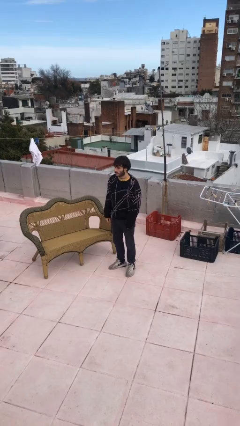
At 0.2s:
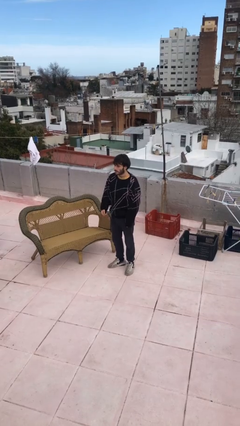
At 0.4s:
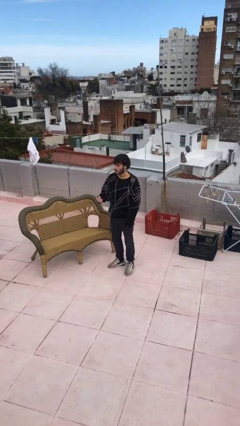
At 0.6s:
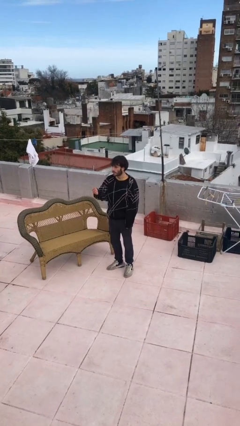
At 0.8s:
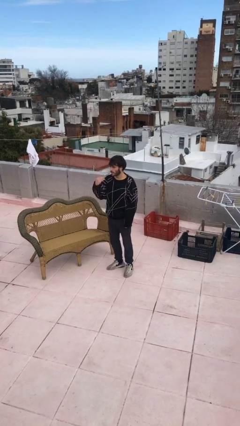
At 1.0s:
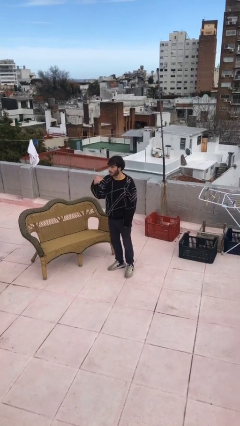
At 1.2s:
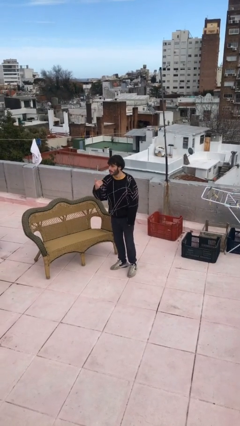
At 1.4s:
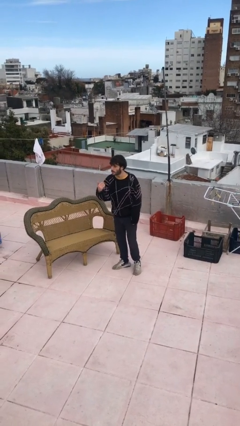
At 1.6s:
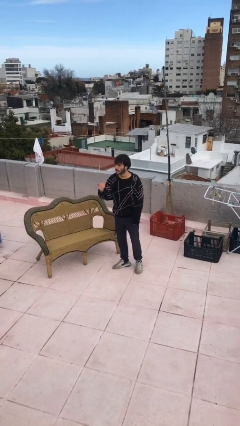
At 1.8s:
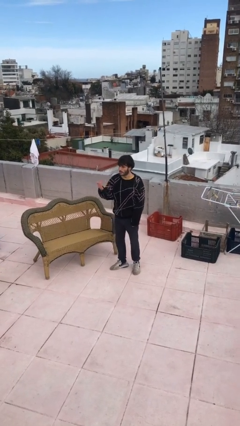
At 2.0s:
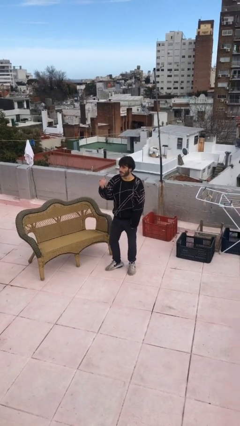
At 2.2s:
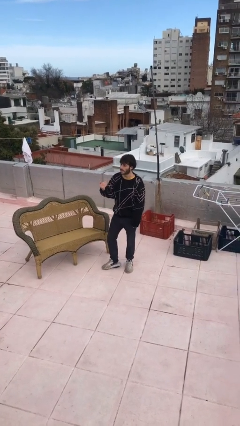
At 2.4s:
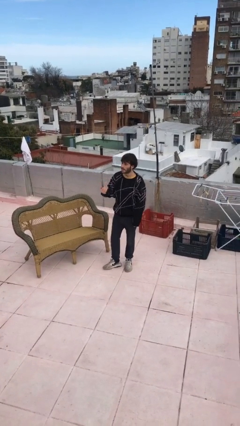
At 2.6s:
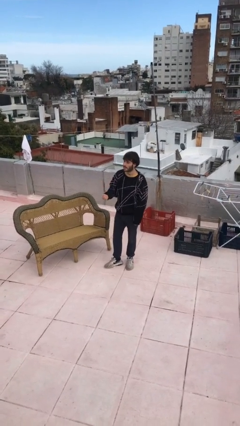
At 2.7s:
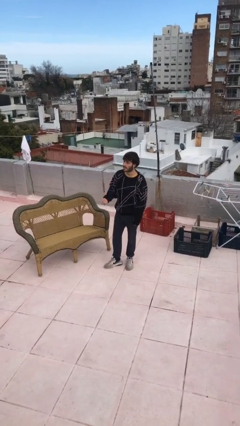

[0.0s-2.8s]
person gestures come here

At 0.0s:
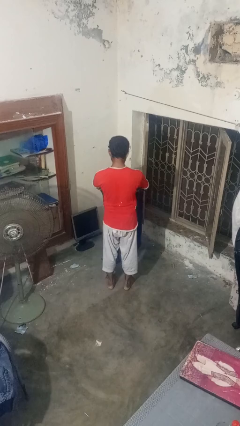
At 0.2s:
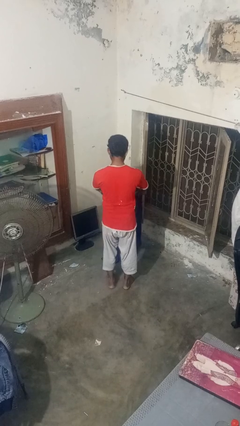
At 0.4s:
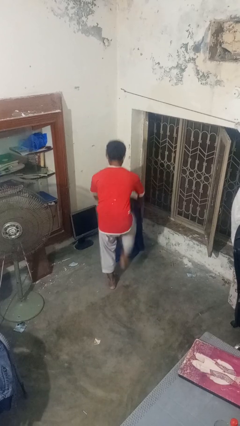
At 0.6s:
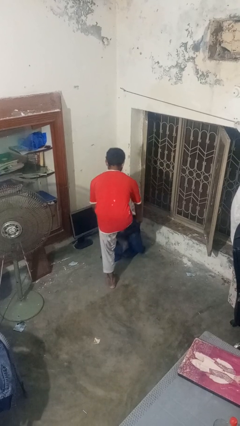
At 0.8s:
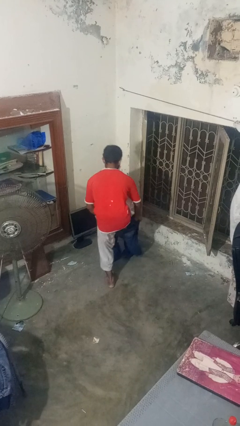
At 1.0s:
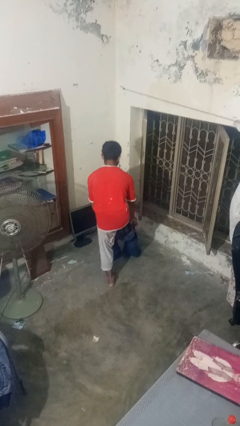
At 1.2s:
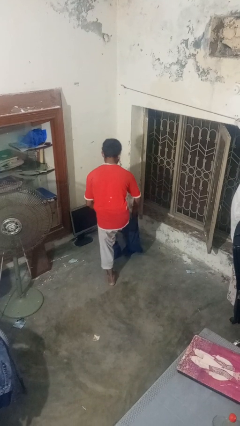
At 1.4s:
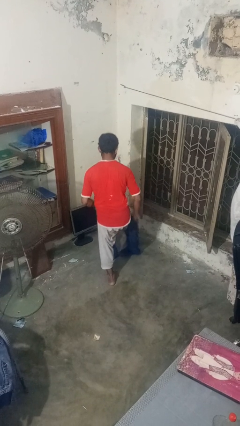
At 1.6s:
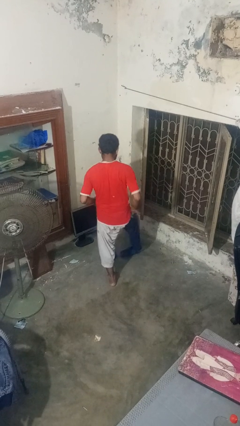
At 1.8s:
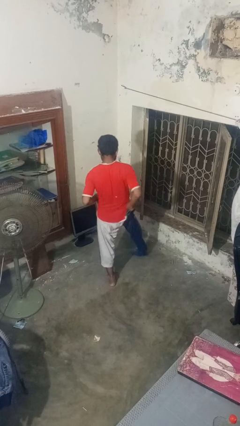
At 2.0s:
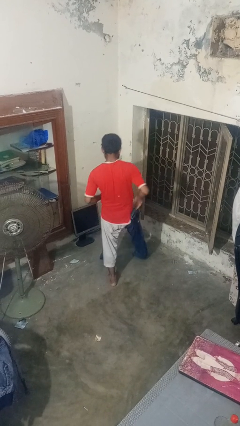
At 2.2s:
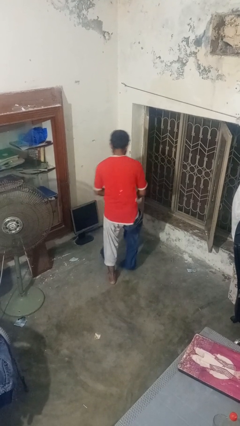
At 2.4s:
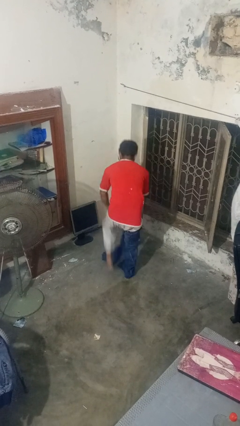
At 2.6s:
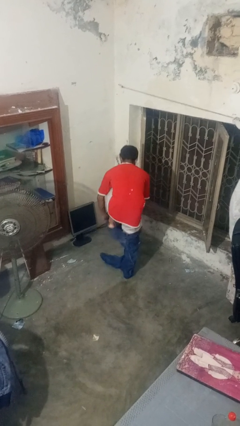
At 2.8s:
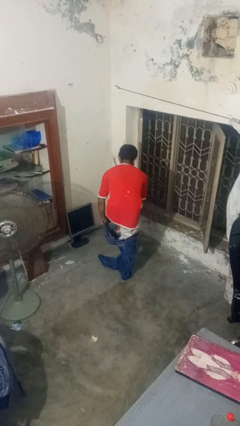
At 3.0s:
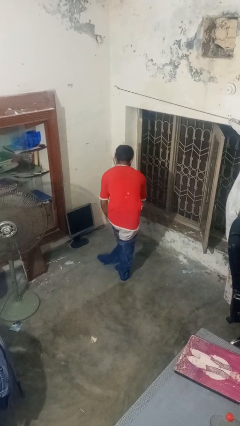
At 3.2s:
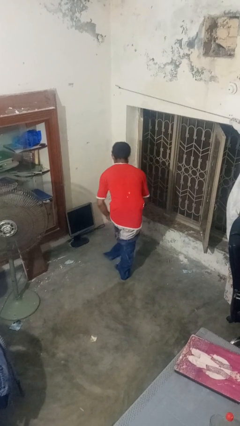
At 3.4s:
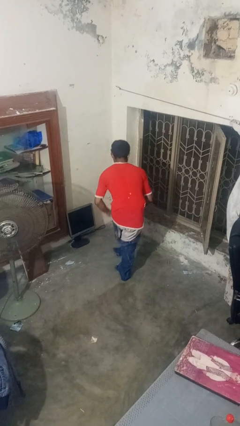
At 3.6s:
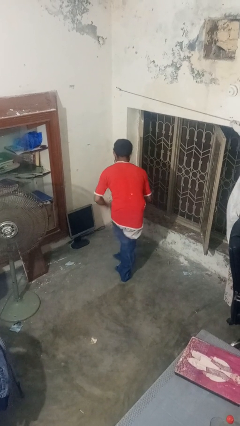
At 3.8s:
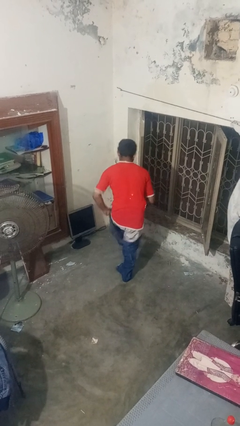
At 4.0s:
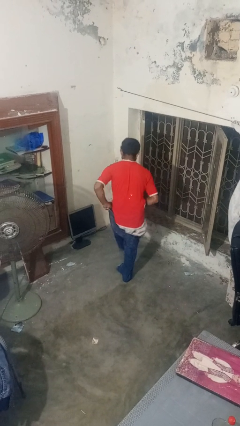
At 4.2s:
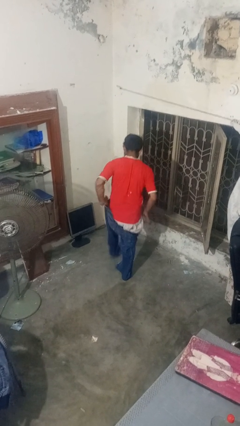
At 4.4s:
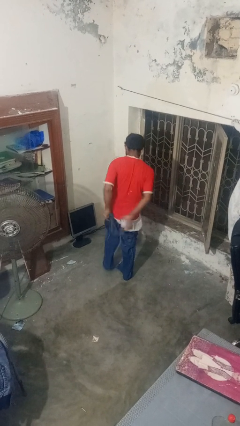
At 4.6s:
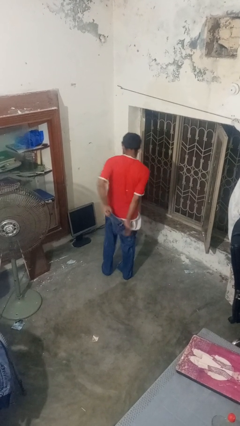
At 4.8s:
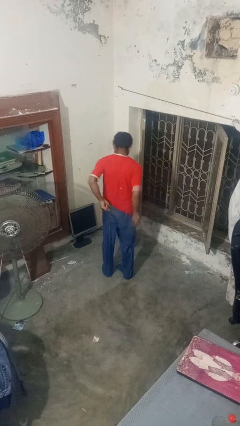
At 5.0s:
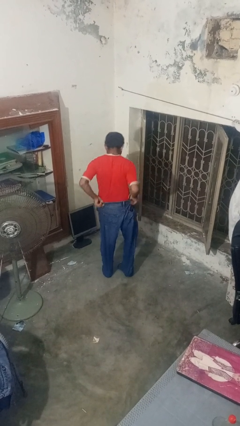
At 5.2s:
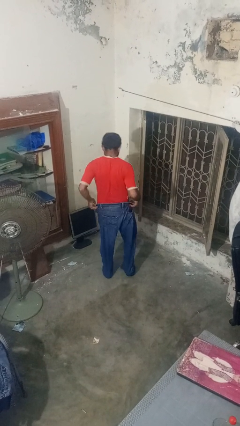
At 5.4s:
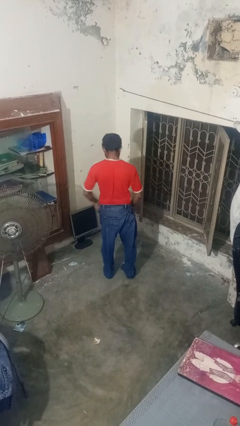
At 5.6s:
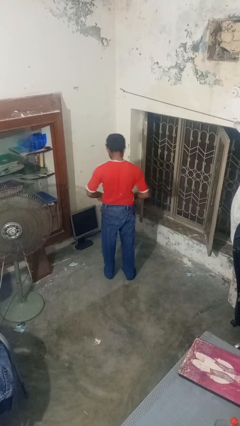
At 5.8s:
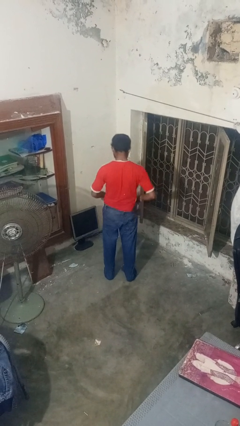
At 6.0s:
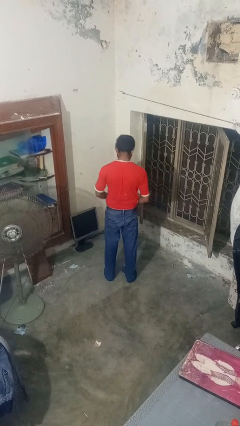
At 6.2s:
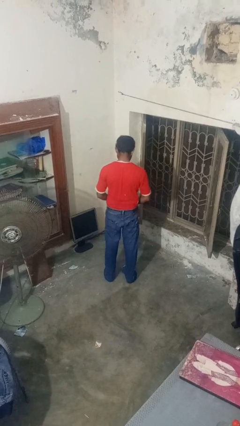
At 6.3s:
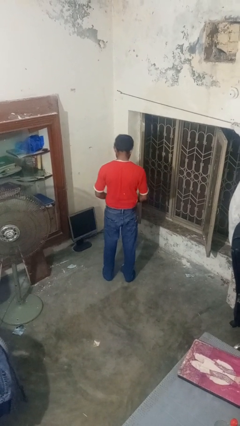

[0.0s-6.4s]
person puts on pants

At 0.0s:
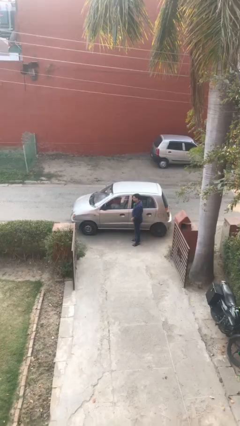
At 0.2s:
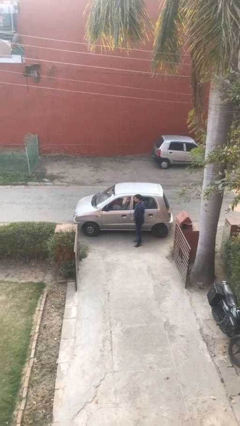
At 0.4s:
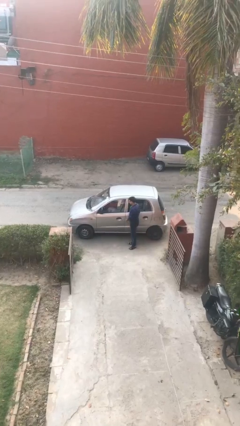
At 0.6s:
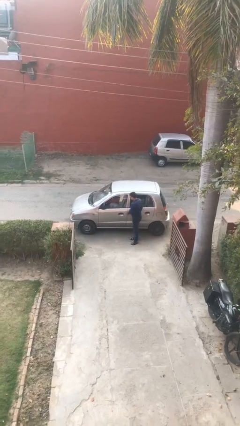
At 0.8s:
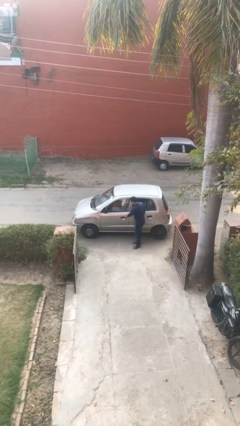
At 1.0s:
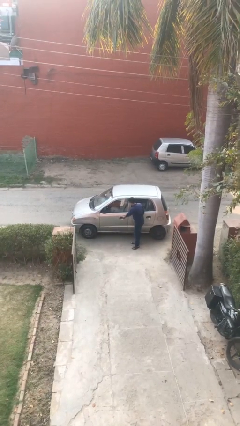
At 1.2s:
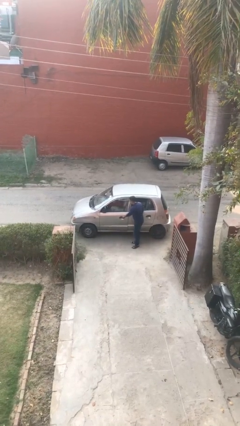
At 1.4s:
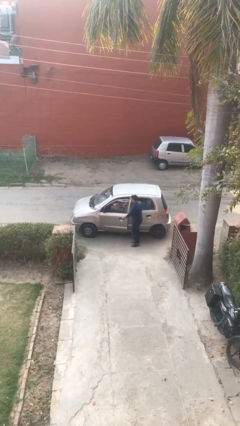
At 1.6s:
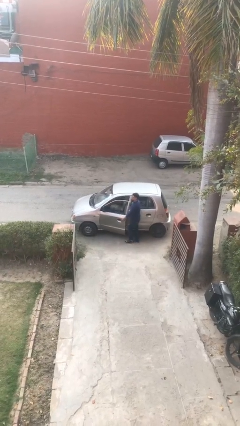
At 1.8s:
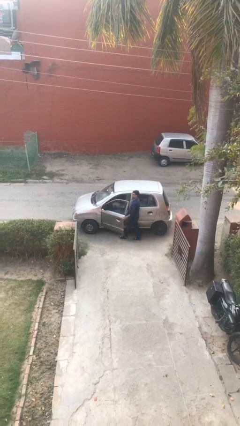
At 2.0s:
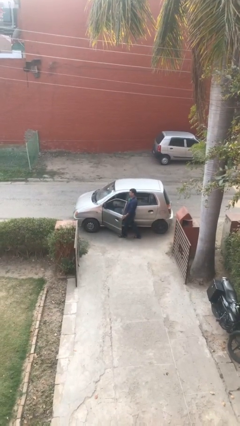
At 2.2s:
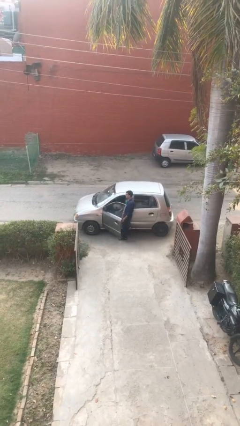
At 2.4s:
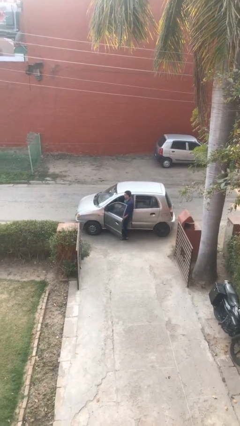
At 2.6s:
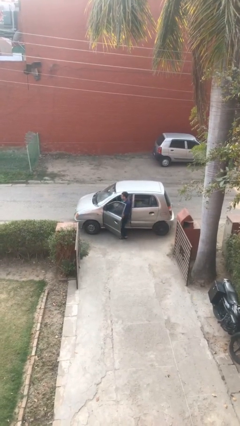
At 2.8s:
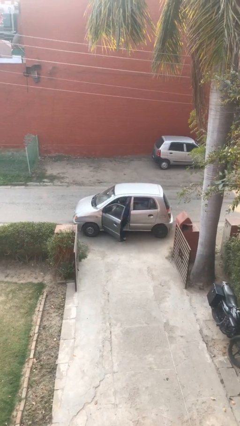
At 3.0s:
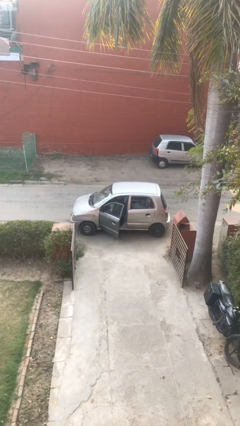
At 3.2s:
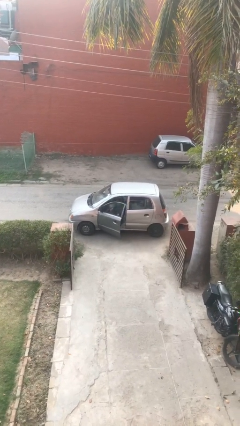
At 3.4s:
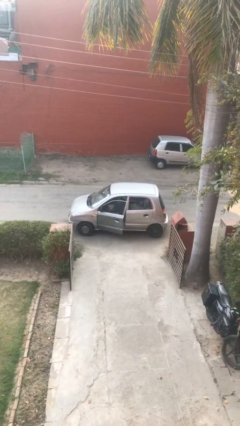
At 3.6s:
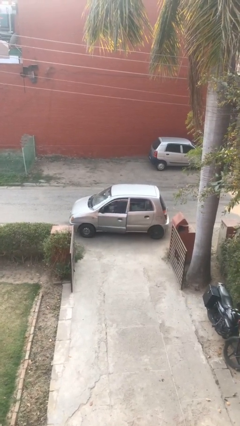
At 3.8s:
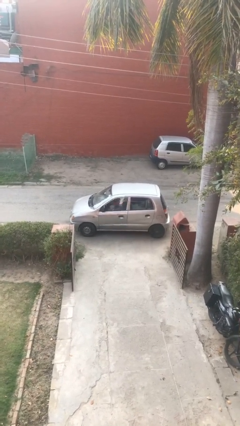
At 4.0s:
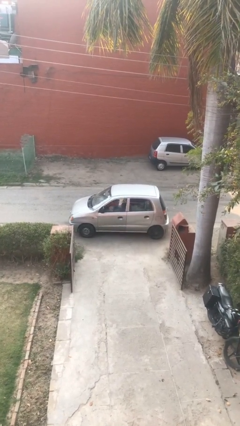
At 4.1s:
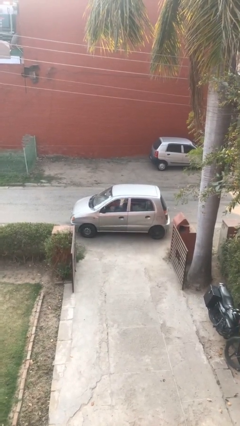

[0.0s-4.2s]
car picks up person

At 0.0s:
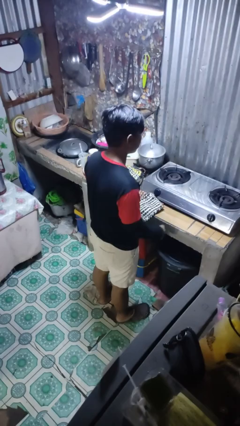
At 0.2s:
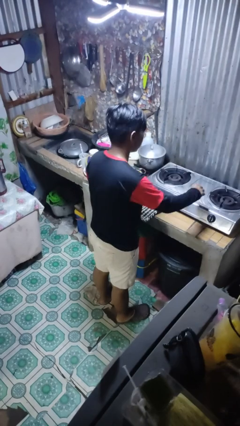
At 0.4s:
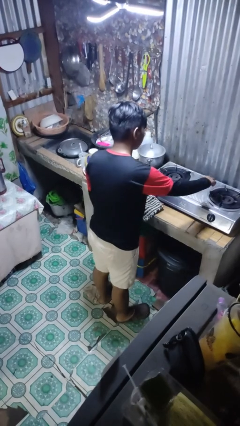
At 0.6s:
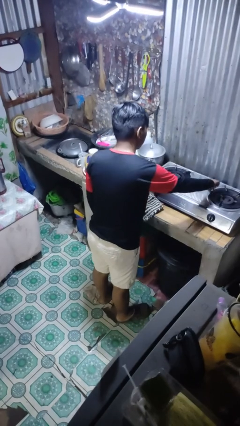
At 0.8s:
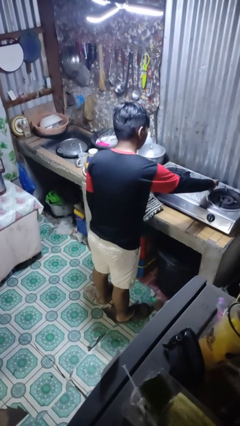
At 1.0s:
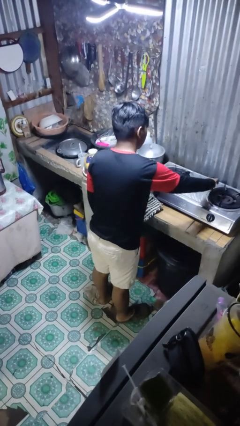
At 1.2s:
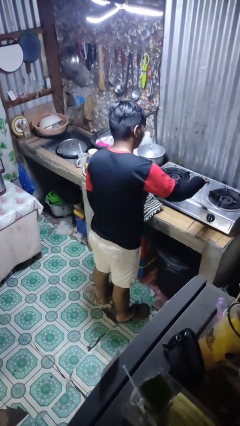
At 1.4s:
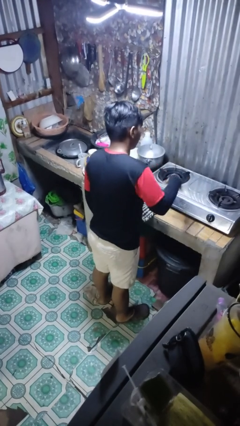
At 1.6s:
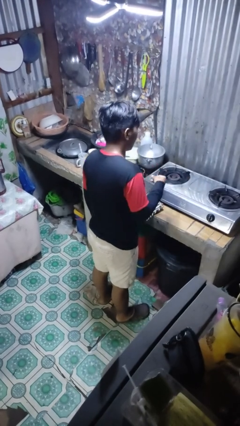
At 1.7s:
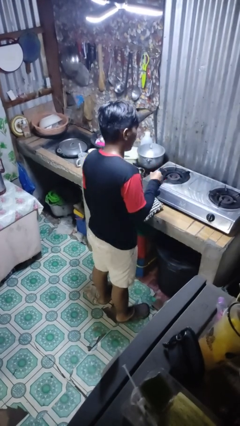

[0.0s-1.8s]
person burns hand

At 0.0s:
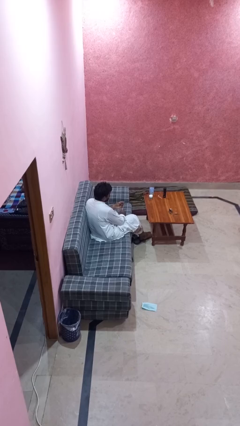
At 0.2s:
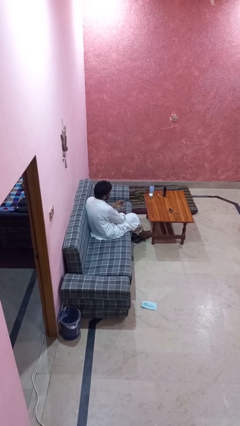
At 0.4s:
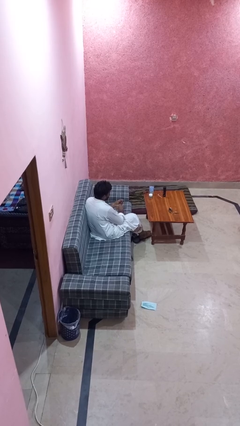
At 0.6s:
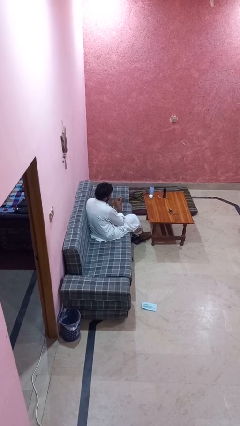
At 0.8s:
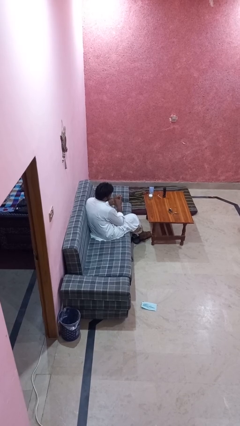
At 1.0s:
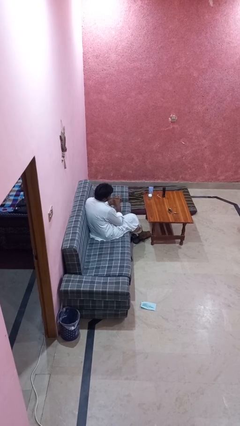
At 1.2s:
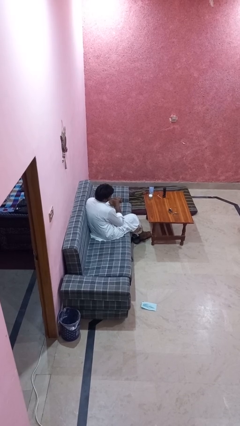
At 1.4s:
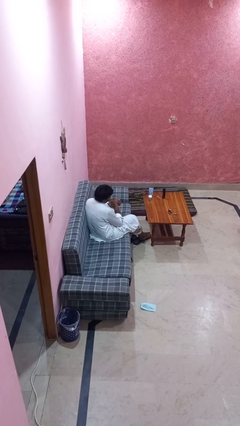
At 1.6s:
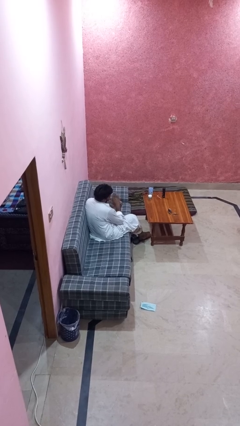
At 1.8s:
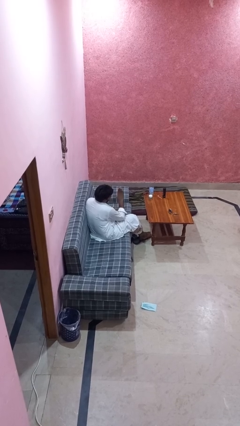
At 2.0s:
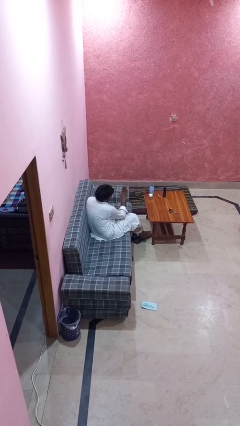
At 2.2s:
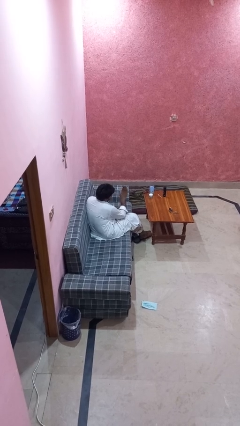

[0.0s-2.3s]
person puts on ring

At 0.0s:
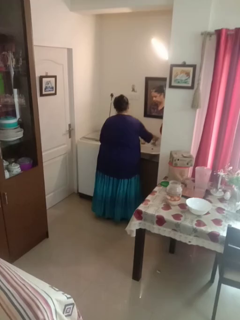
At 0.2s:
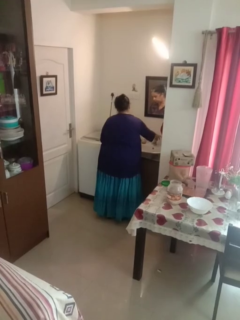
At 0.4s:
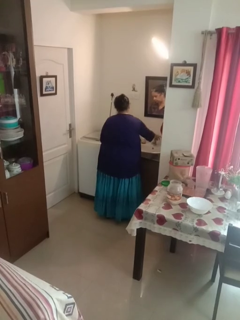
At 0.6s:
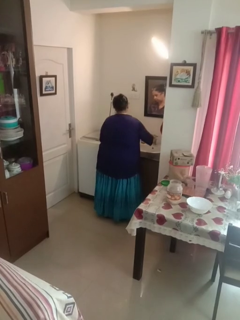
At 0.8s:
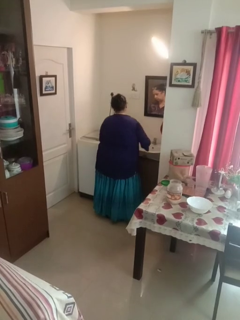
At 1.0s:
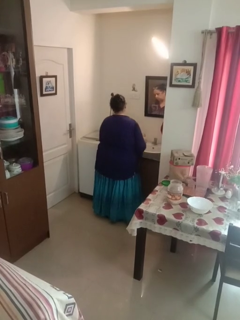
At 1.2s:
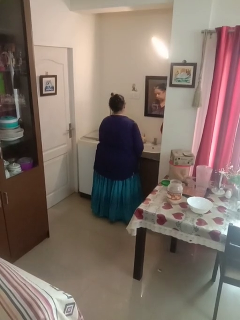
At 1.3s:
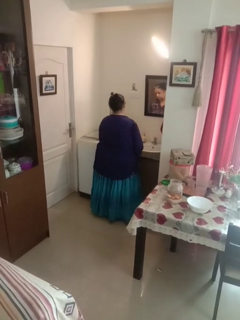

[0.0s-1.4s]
person turns on faucet
